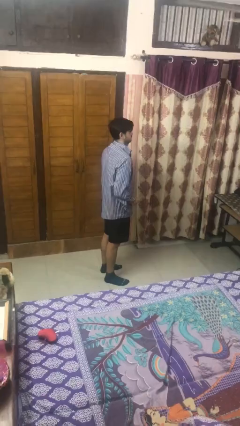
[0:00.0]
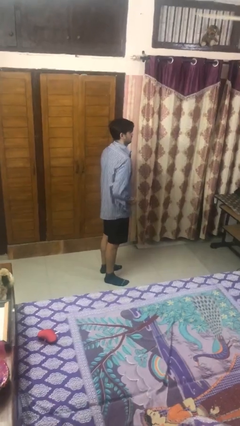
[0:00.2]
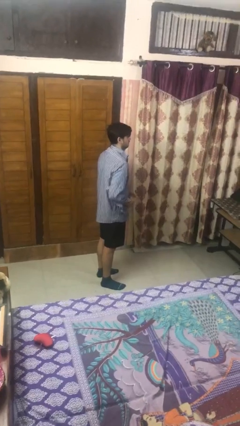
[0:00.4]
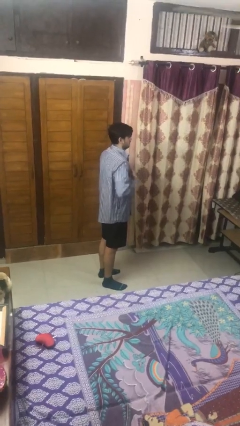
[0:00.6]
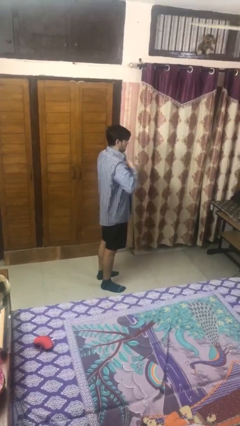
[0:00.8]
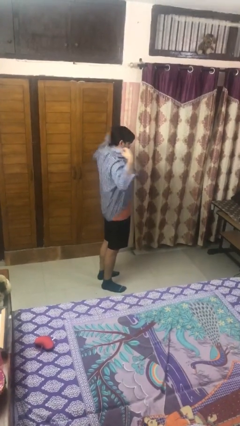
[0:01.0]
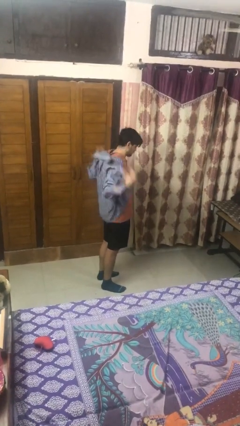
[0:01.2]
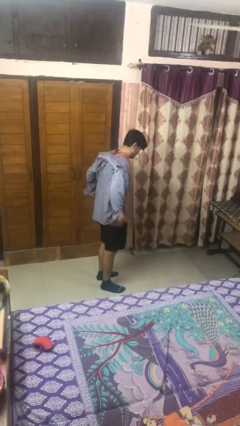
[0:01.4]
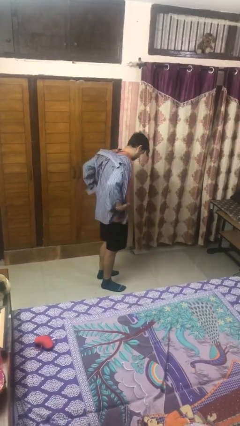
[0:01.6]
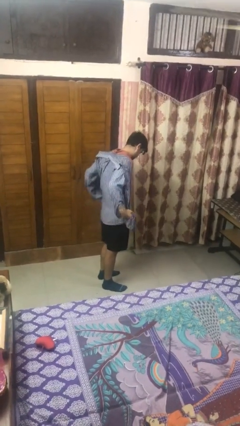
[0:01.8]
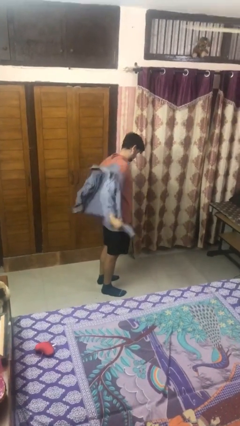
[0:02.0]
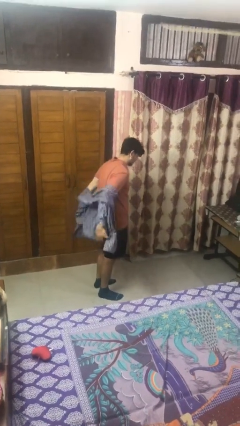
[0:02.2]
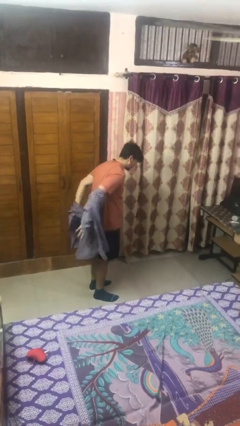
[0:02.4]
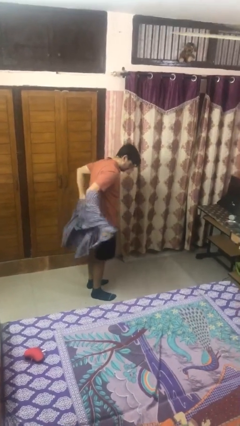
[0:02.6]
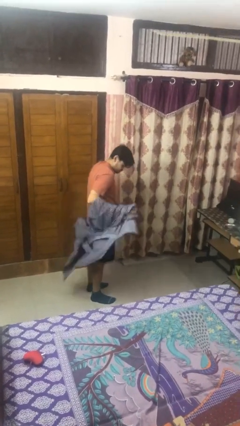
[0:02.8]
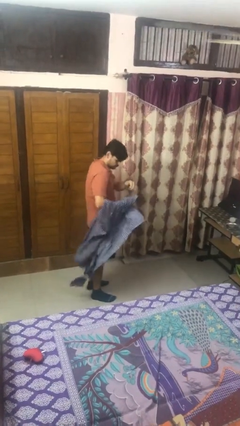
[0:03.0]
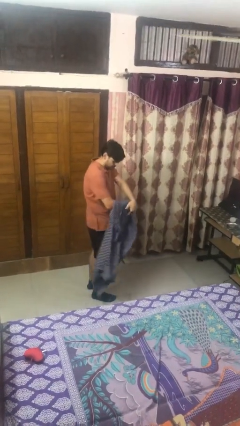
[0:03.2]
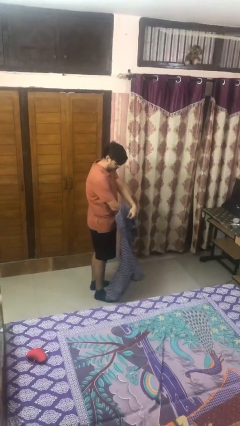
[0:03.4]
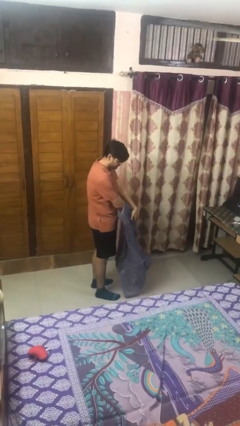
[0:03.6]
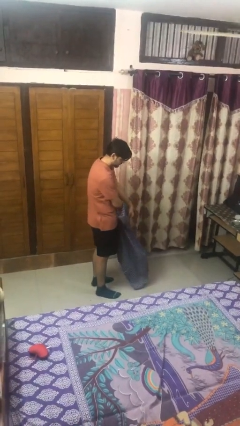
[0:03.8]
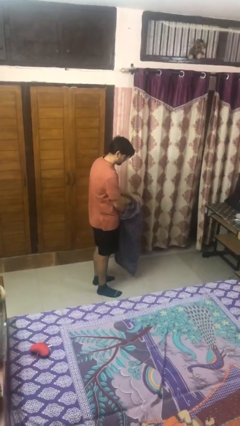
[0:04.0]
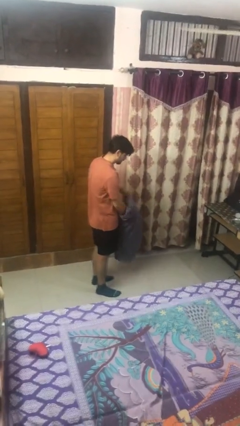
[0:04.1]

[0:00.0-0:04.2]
person takes off shirt

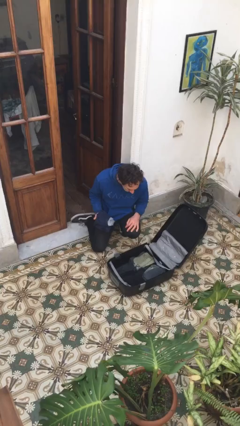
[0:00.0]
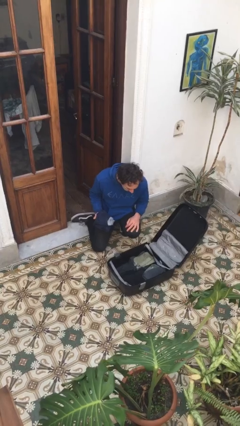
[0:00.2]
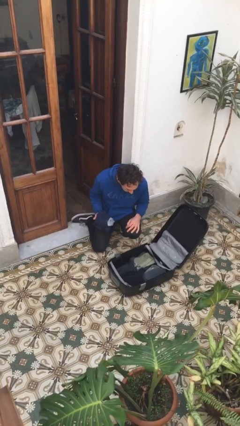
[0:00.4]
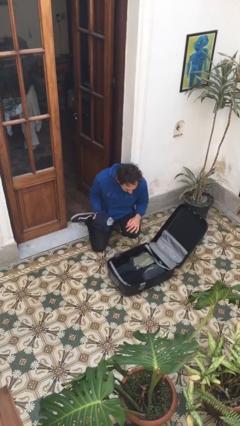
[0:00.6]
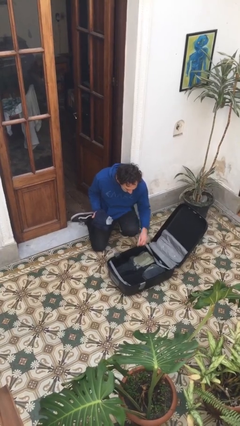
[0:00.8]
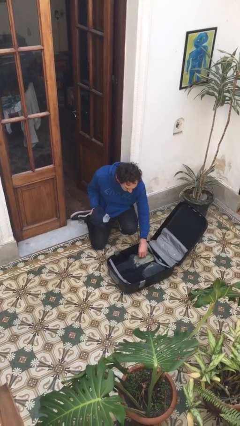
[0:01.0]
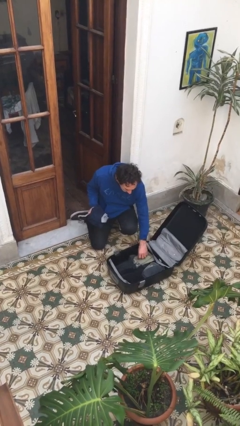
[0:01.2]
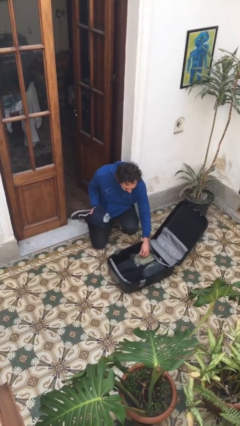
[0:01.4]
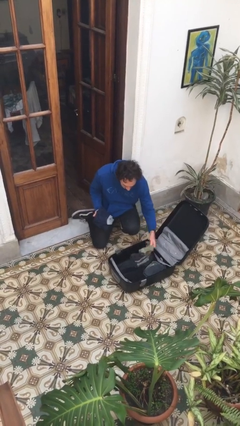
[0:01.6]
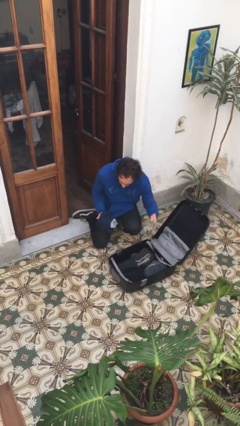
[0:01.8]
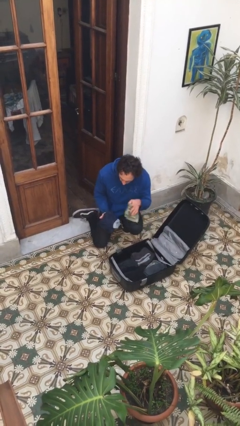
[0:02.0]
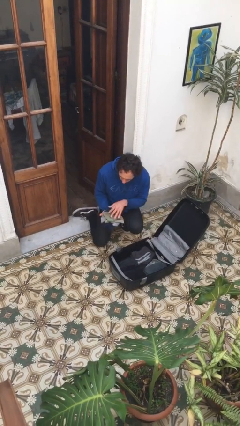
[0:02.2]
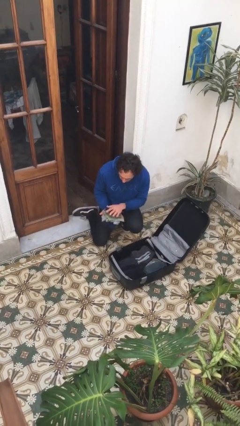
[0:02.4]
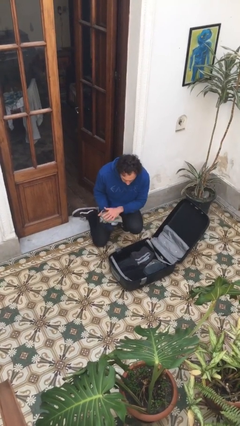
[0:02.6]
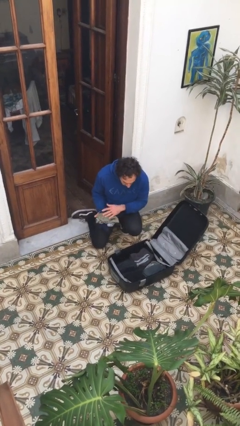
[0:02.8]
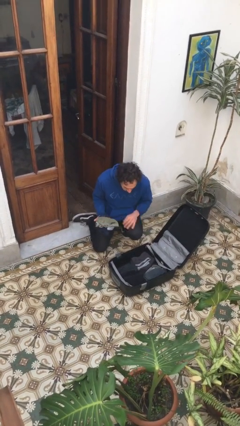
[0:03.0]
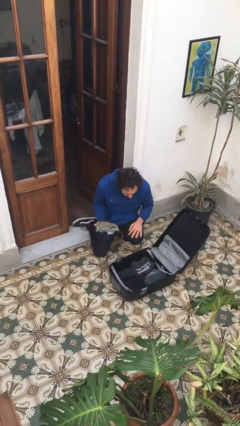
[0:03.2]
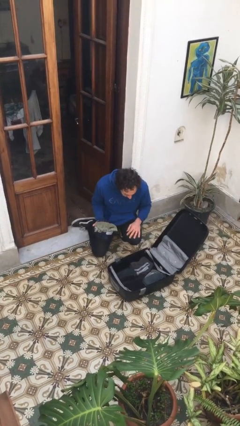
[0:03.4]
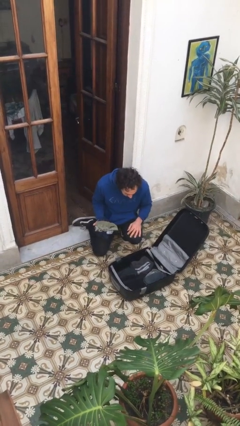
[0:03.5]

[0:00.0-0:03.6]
person unloads clothes from suitcase

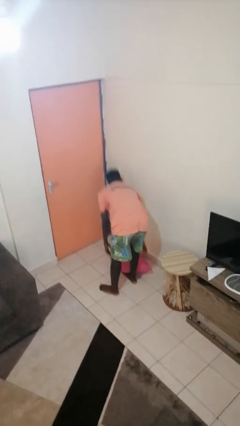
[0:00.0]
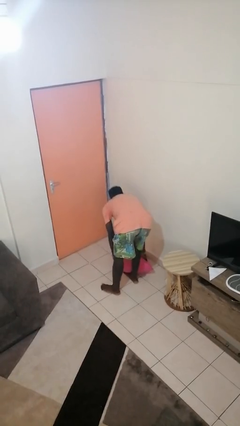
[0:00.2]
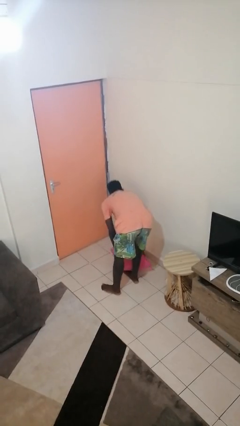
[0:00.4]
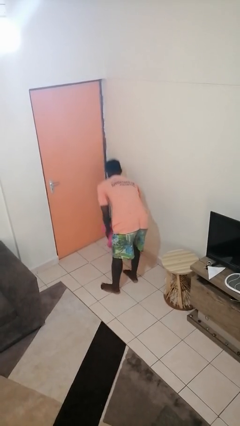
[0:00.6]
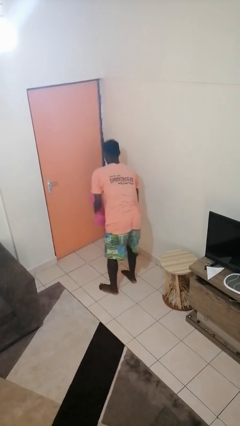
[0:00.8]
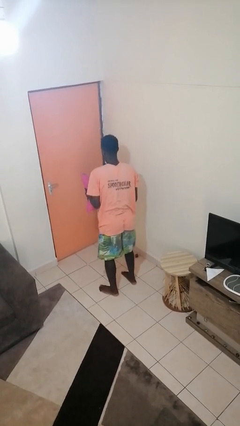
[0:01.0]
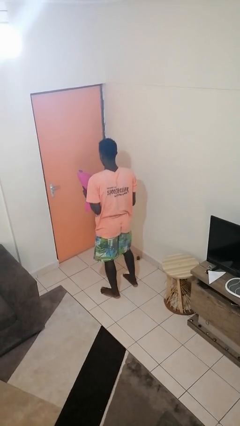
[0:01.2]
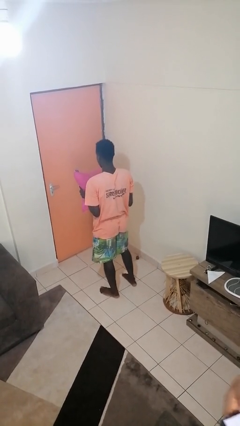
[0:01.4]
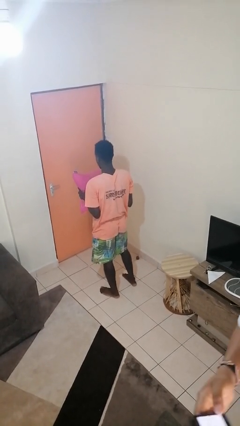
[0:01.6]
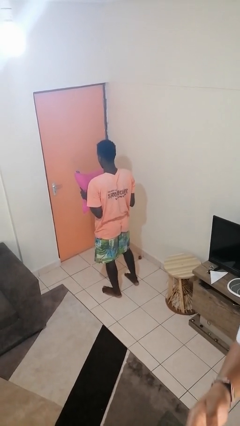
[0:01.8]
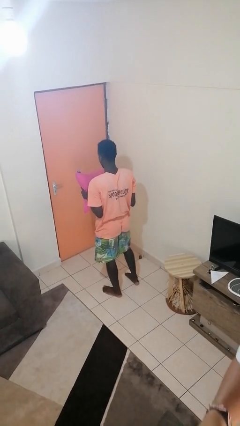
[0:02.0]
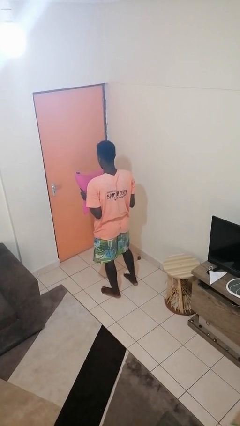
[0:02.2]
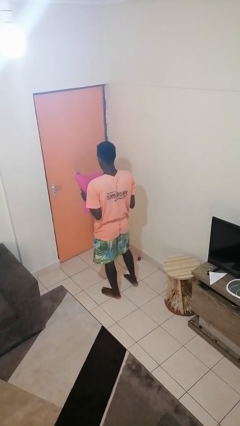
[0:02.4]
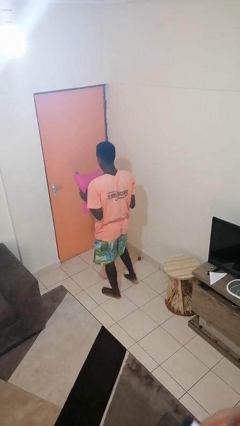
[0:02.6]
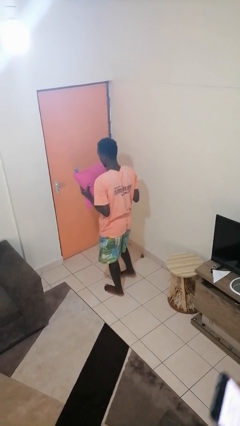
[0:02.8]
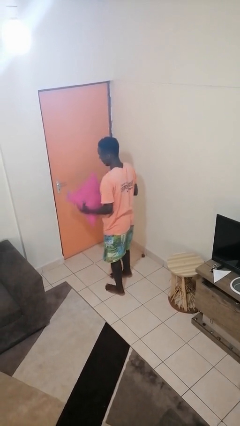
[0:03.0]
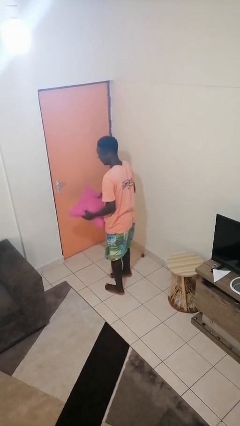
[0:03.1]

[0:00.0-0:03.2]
person picks up object from floor

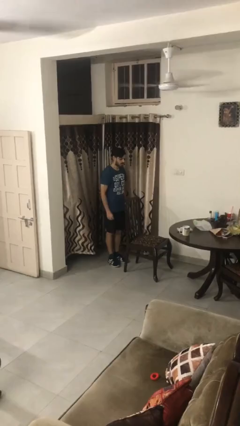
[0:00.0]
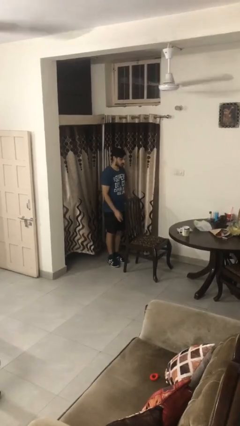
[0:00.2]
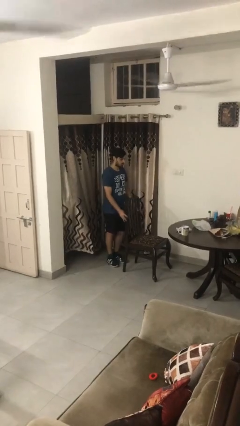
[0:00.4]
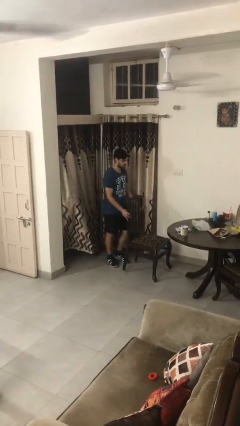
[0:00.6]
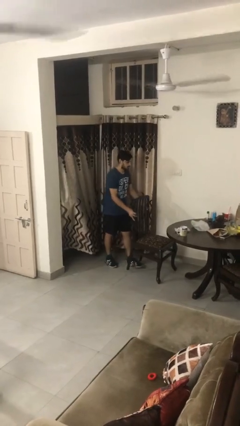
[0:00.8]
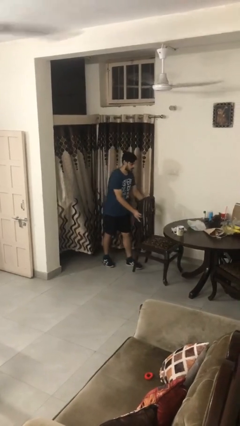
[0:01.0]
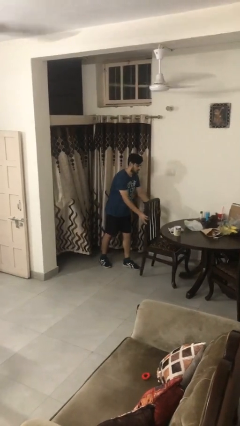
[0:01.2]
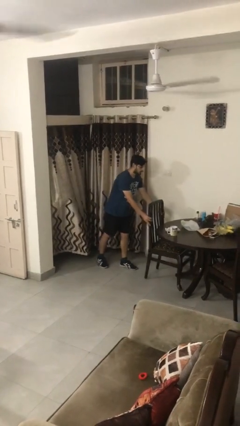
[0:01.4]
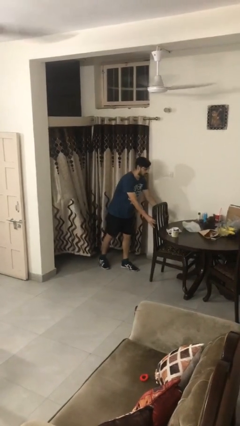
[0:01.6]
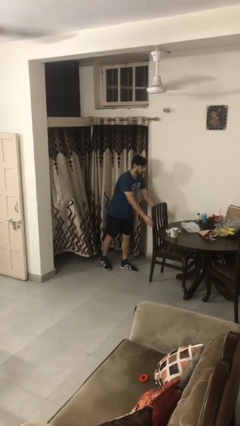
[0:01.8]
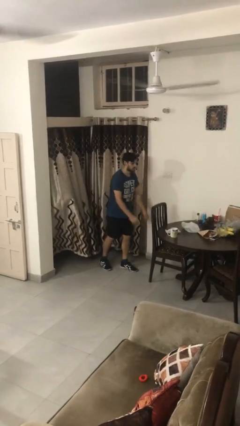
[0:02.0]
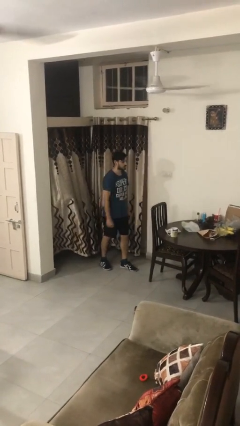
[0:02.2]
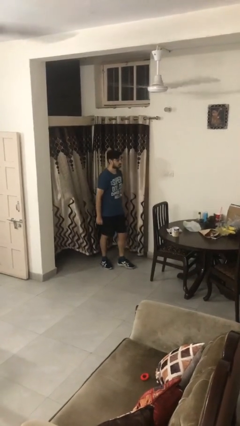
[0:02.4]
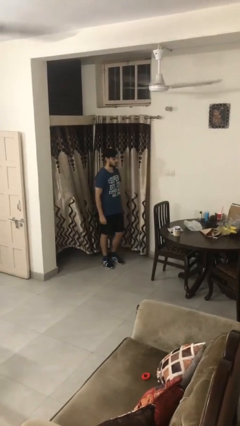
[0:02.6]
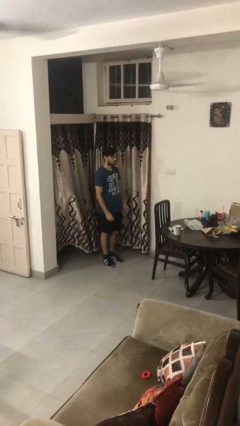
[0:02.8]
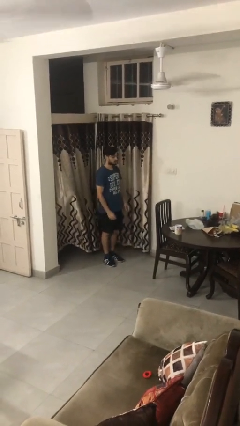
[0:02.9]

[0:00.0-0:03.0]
person pushes in chair

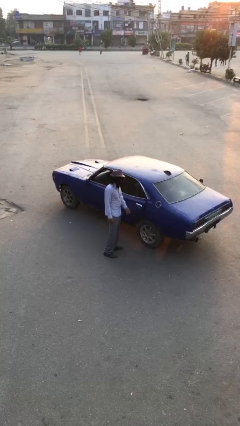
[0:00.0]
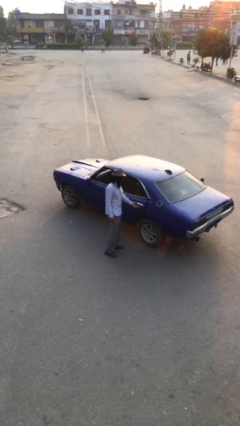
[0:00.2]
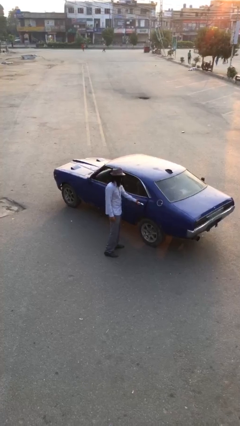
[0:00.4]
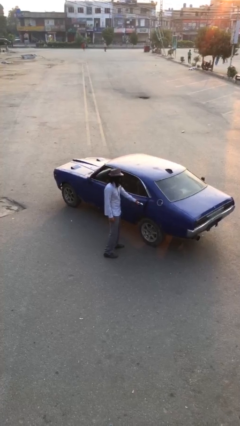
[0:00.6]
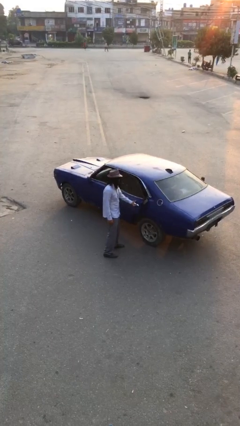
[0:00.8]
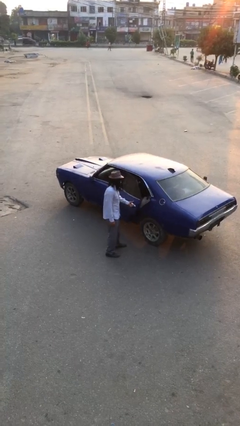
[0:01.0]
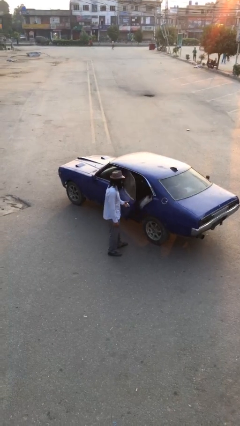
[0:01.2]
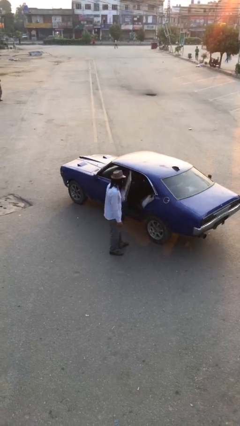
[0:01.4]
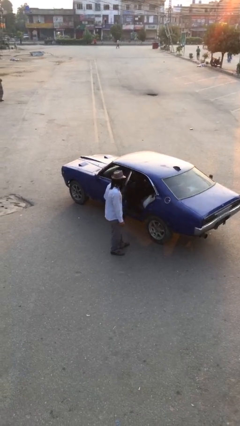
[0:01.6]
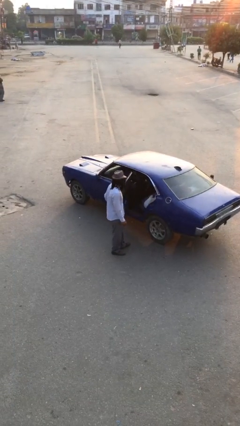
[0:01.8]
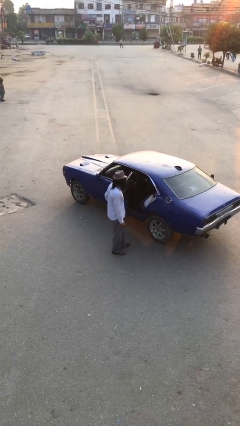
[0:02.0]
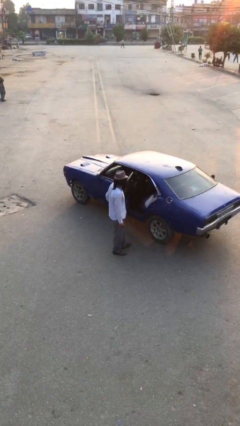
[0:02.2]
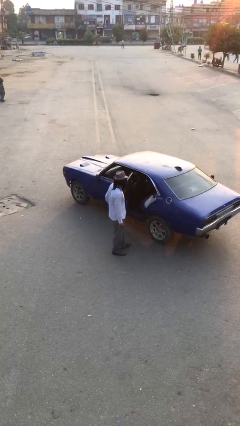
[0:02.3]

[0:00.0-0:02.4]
person opens car door

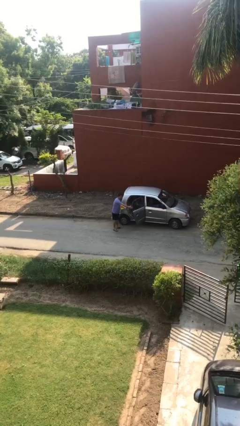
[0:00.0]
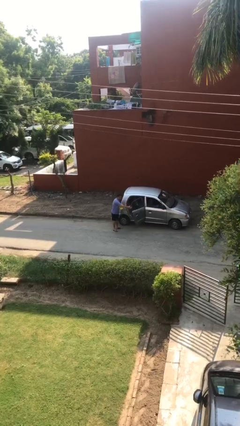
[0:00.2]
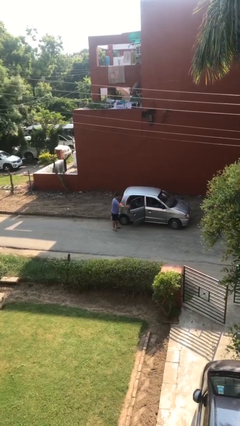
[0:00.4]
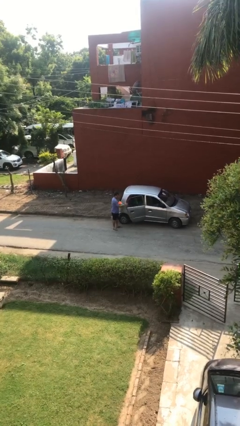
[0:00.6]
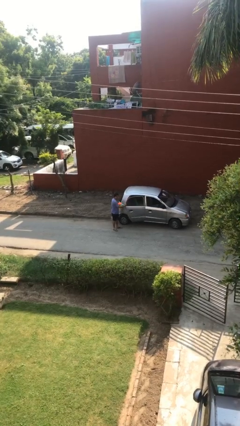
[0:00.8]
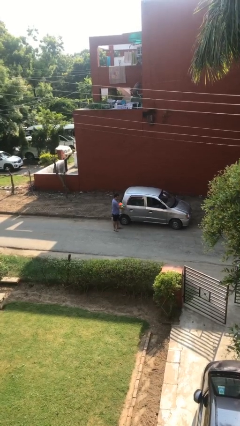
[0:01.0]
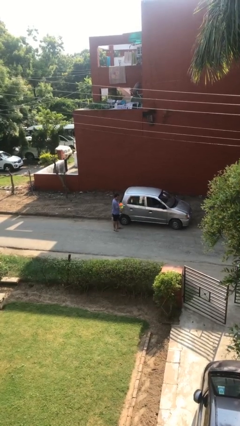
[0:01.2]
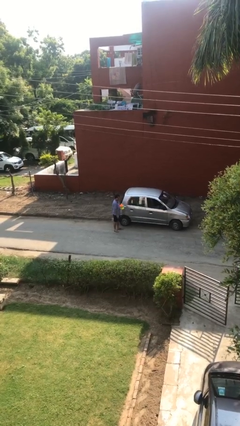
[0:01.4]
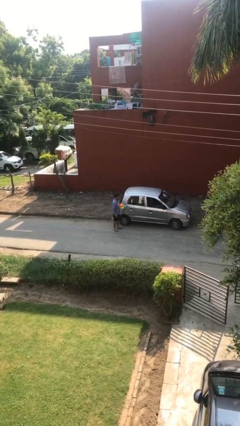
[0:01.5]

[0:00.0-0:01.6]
person closes car door
